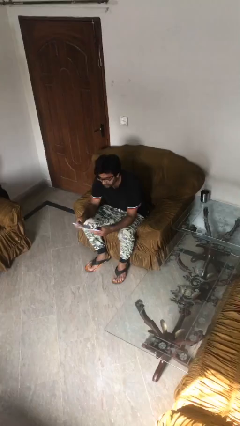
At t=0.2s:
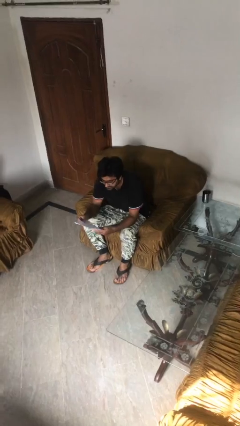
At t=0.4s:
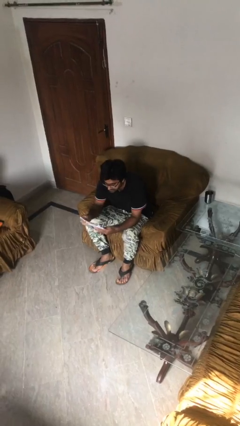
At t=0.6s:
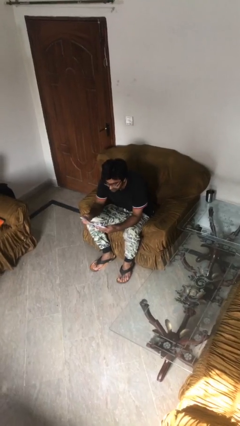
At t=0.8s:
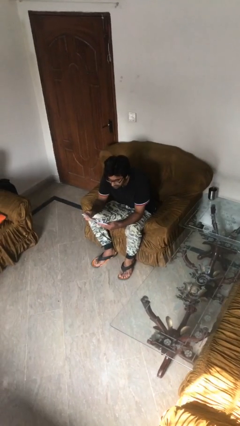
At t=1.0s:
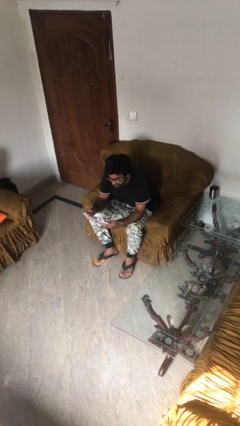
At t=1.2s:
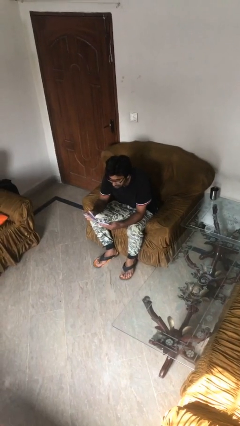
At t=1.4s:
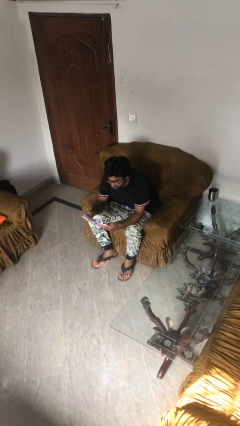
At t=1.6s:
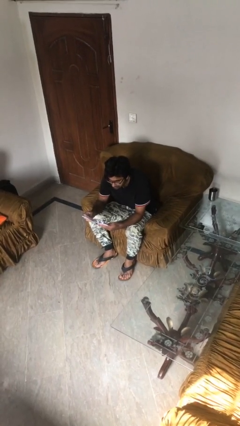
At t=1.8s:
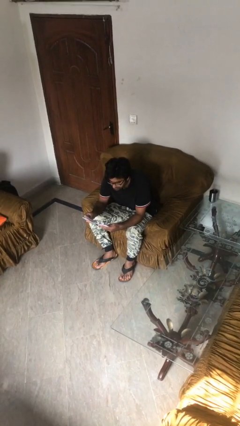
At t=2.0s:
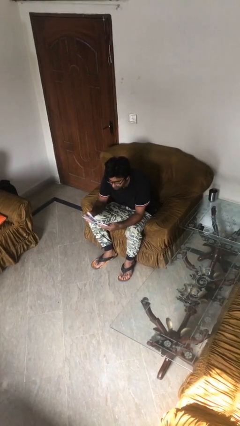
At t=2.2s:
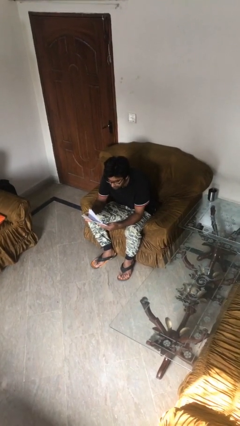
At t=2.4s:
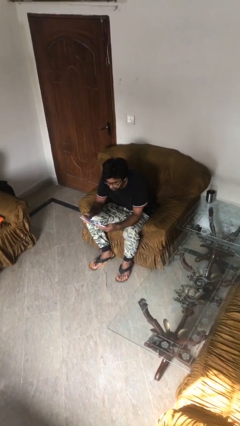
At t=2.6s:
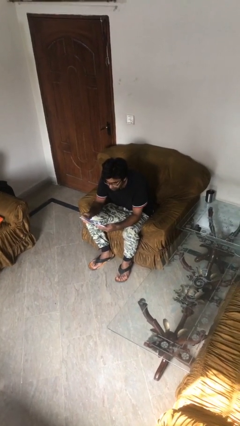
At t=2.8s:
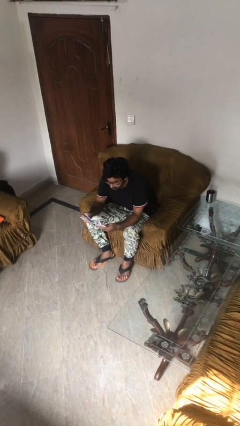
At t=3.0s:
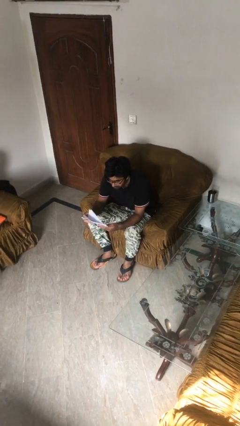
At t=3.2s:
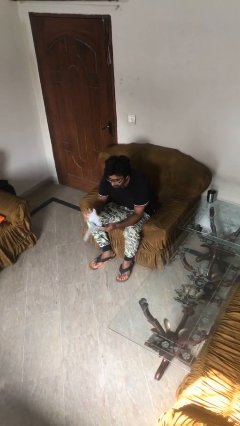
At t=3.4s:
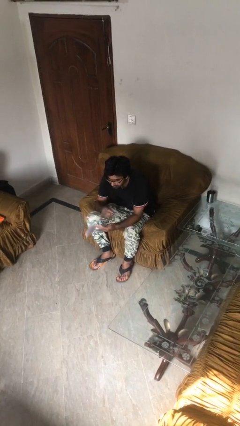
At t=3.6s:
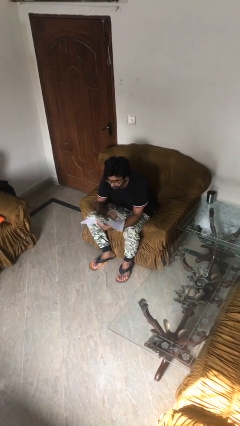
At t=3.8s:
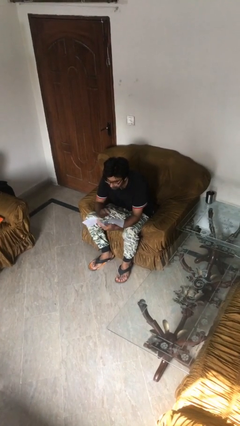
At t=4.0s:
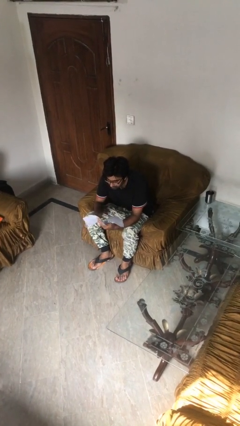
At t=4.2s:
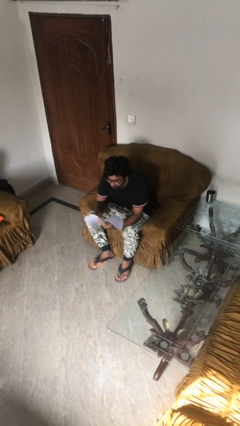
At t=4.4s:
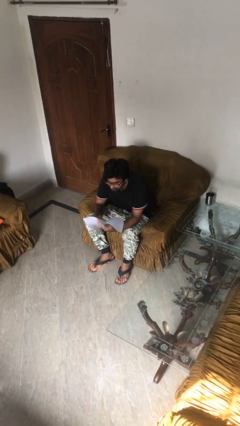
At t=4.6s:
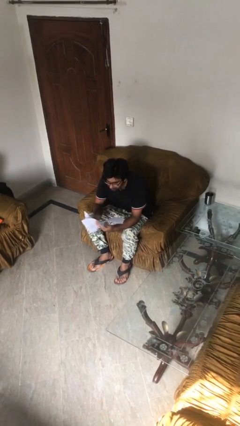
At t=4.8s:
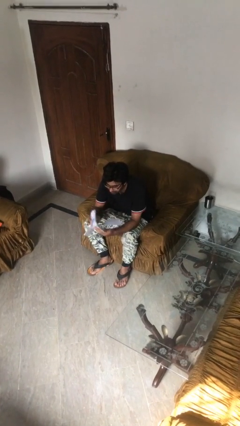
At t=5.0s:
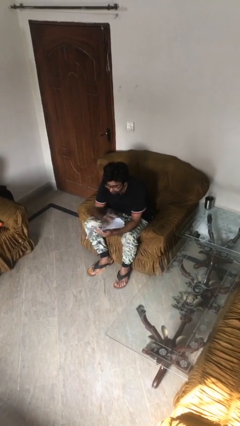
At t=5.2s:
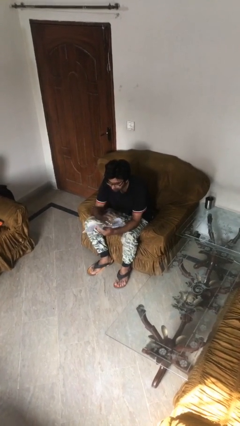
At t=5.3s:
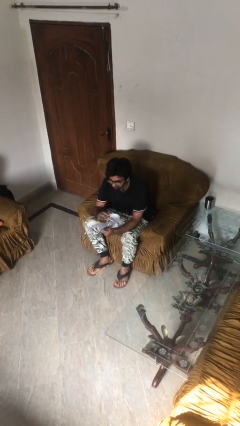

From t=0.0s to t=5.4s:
person reads document

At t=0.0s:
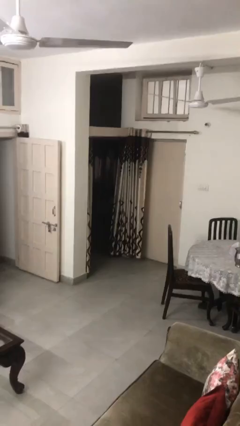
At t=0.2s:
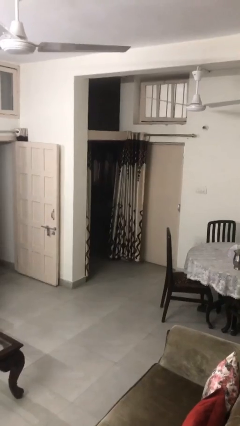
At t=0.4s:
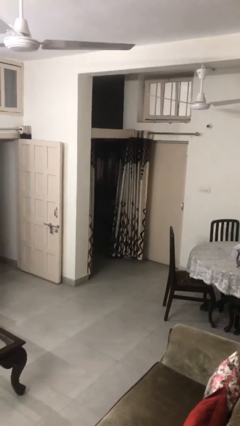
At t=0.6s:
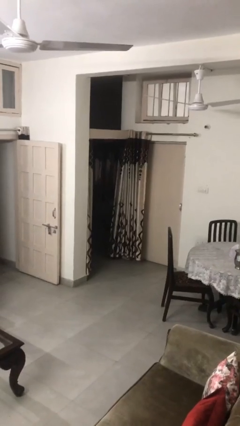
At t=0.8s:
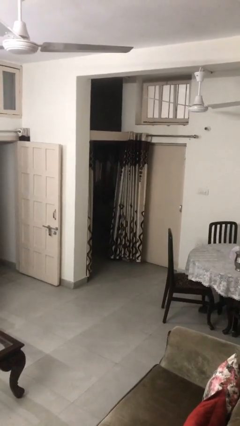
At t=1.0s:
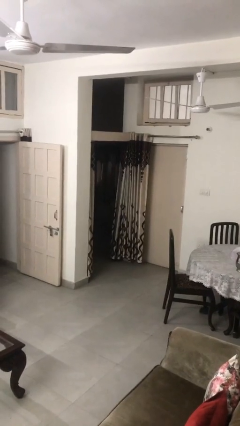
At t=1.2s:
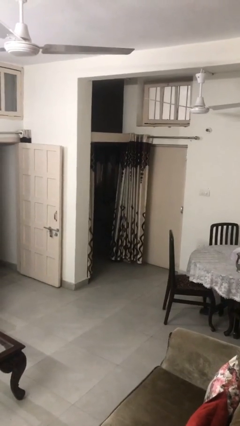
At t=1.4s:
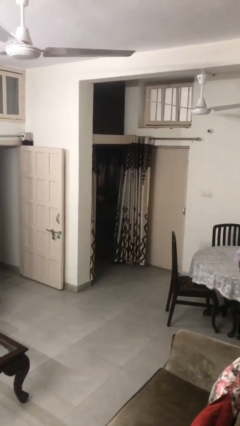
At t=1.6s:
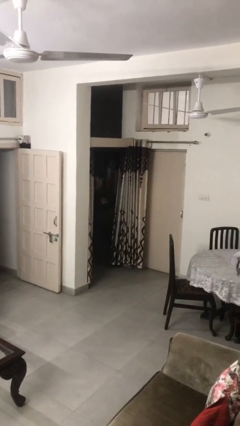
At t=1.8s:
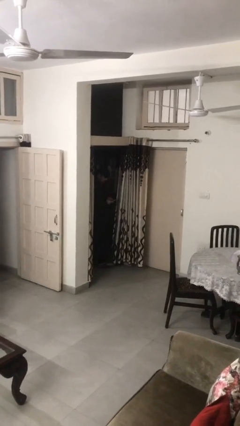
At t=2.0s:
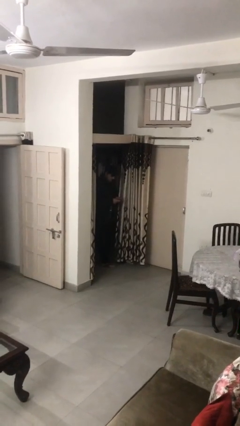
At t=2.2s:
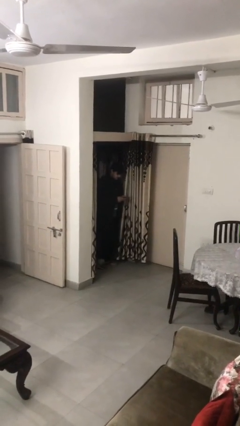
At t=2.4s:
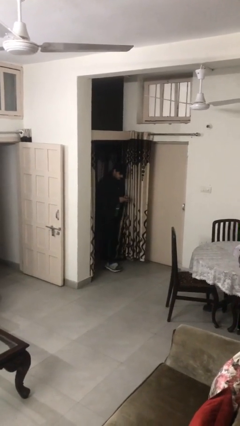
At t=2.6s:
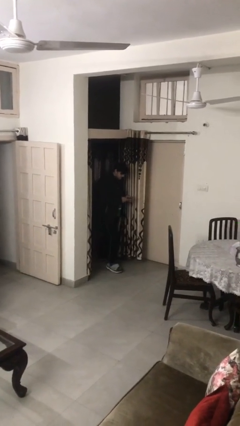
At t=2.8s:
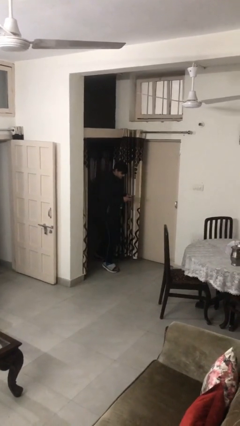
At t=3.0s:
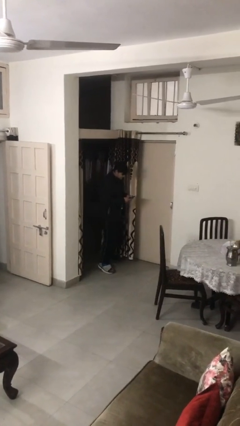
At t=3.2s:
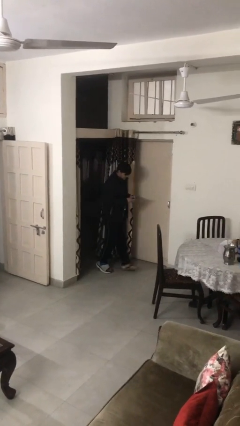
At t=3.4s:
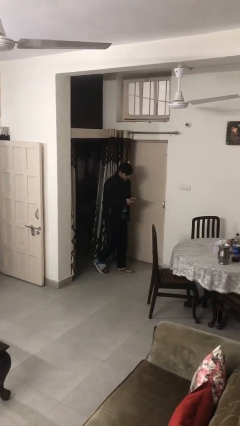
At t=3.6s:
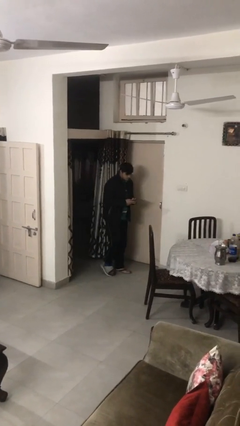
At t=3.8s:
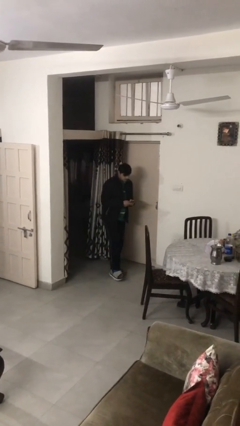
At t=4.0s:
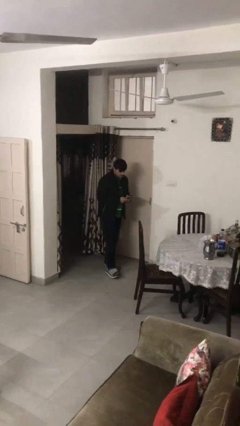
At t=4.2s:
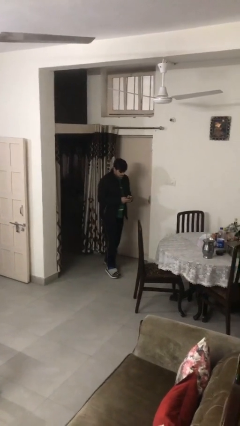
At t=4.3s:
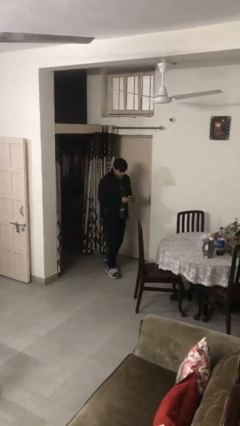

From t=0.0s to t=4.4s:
person enters scene through structure

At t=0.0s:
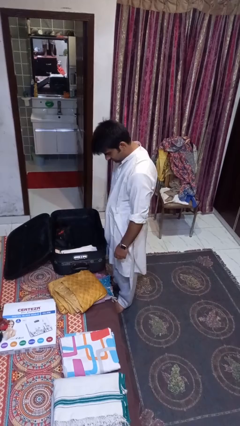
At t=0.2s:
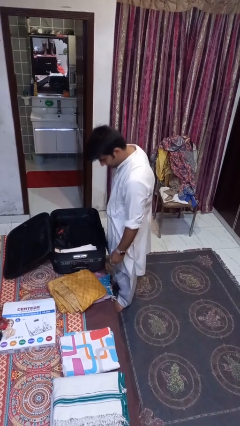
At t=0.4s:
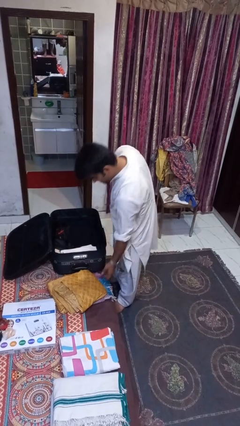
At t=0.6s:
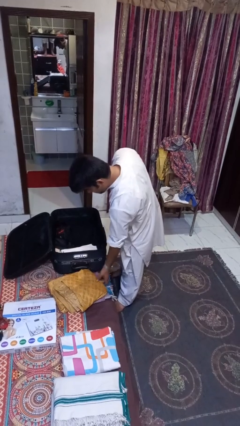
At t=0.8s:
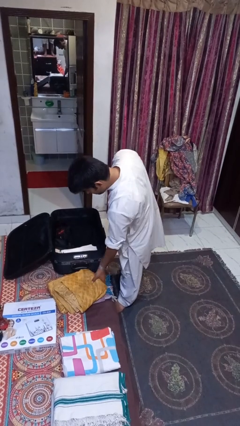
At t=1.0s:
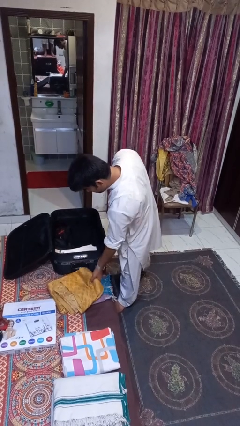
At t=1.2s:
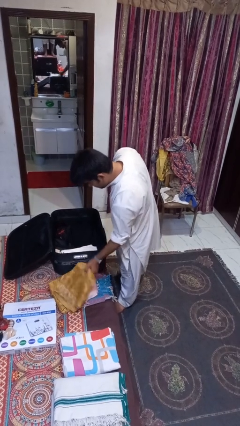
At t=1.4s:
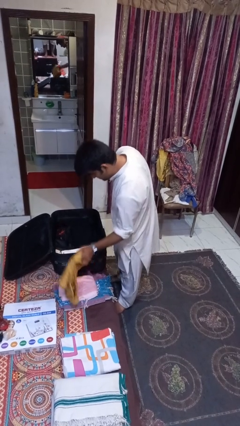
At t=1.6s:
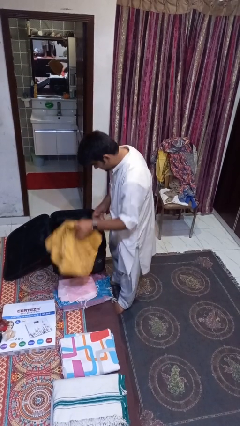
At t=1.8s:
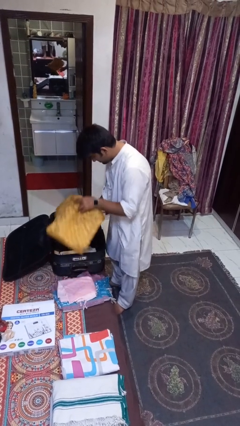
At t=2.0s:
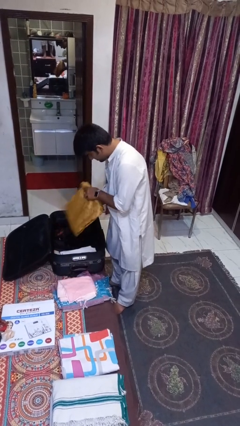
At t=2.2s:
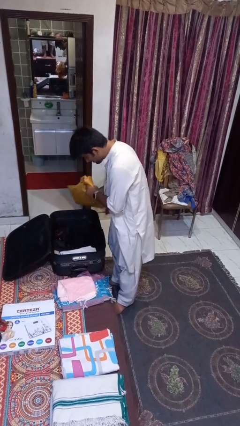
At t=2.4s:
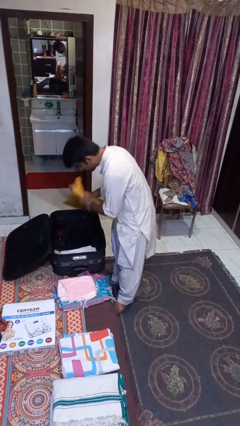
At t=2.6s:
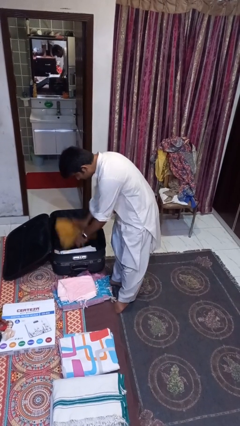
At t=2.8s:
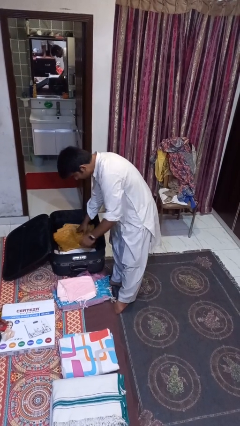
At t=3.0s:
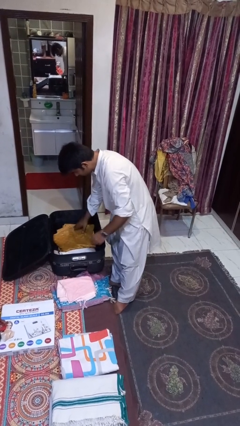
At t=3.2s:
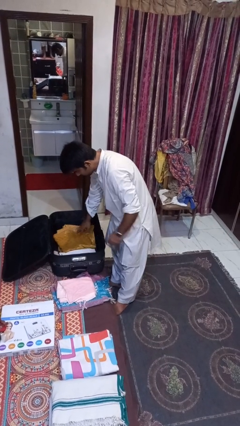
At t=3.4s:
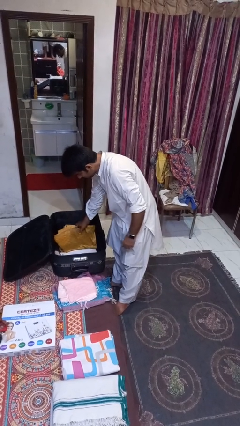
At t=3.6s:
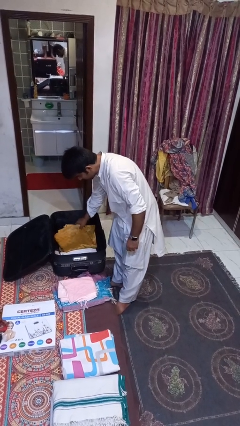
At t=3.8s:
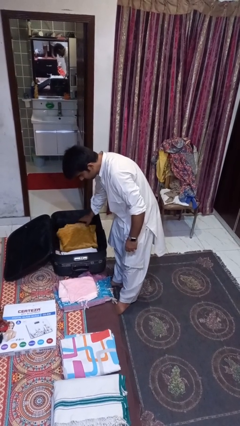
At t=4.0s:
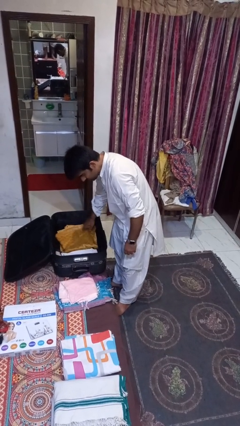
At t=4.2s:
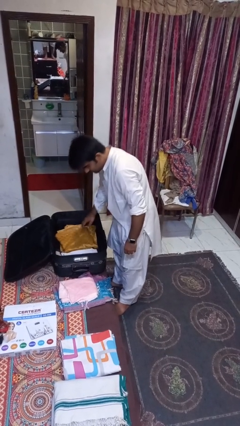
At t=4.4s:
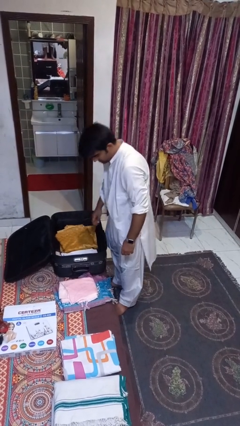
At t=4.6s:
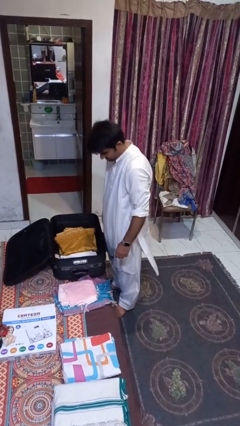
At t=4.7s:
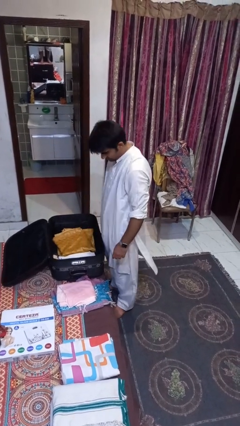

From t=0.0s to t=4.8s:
person loads clothes into suitcase

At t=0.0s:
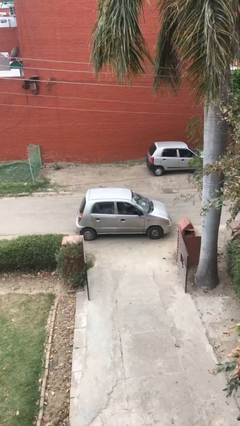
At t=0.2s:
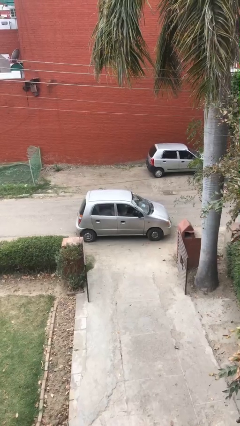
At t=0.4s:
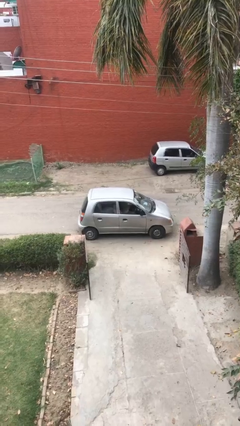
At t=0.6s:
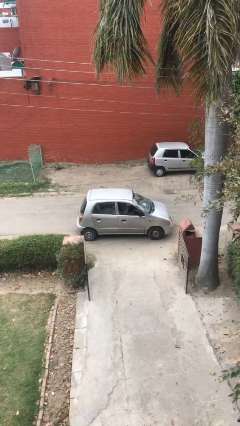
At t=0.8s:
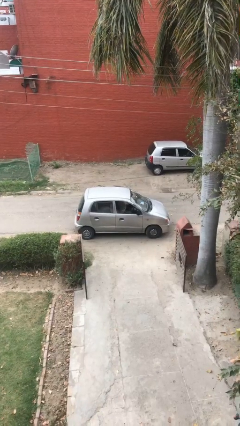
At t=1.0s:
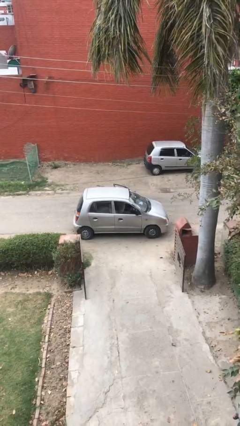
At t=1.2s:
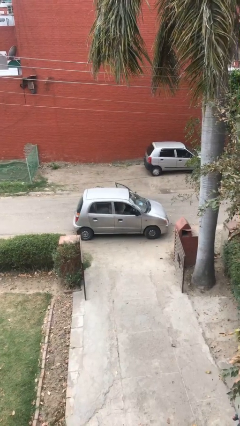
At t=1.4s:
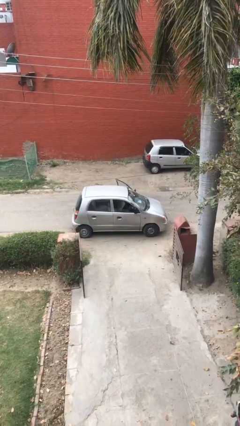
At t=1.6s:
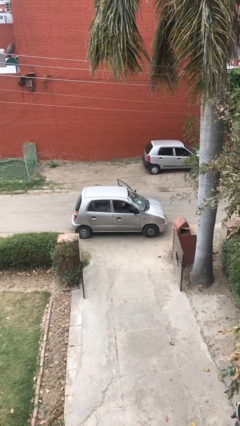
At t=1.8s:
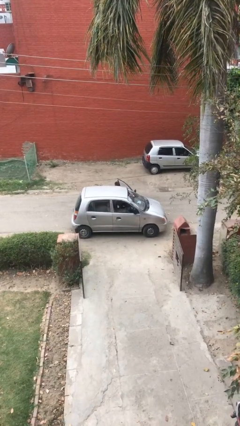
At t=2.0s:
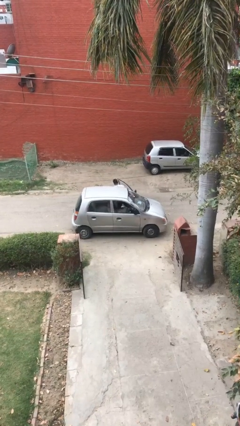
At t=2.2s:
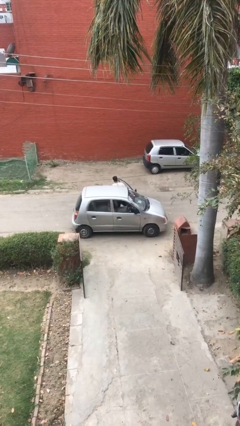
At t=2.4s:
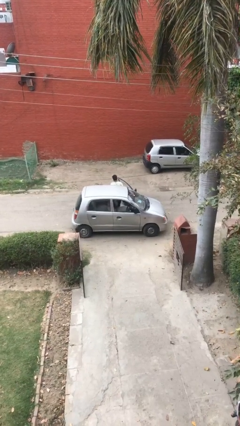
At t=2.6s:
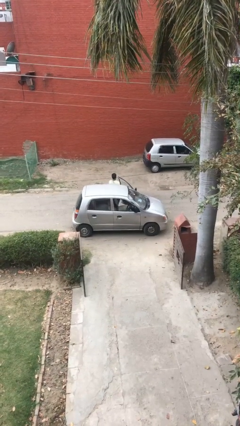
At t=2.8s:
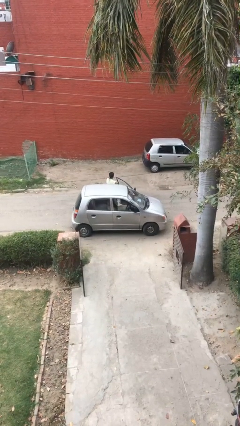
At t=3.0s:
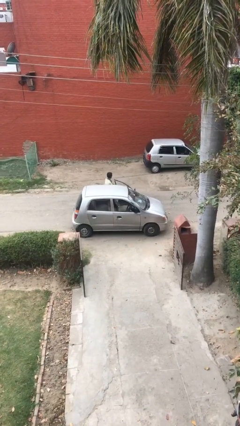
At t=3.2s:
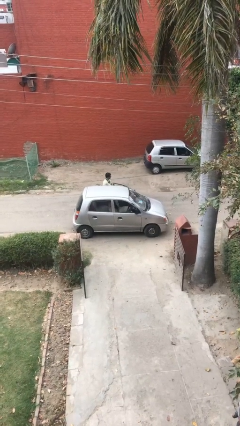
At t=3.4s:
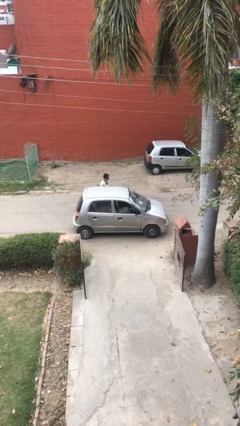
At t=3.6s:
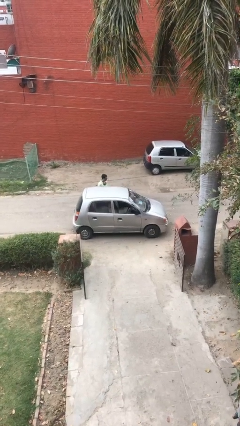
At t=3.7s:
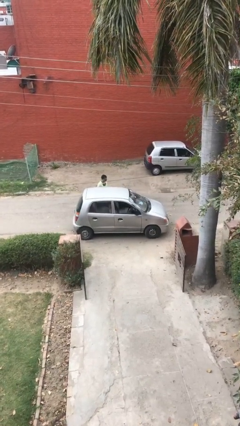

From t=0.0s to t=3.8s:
car drops off person
